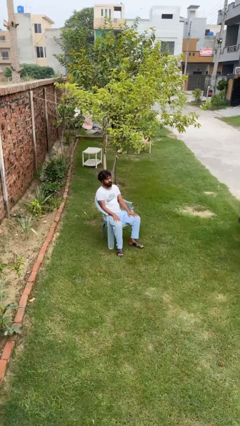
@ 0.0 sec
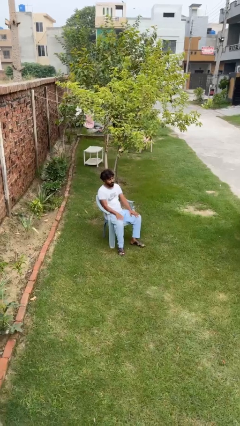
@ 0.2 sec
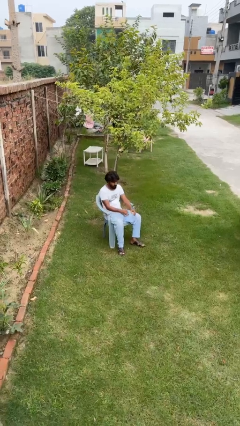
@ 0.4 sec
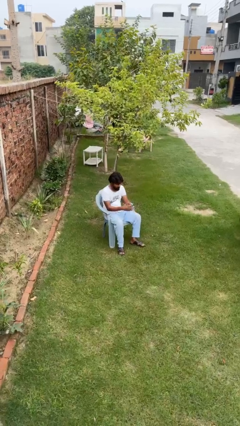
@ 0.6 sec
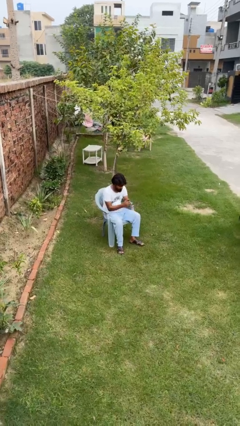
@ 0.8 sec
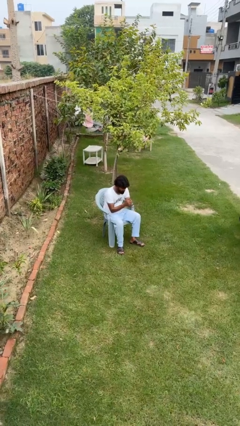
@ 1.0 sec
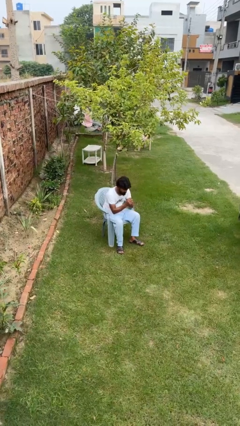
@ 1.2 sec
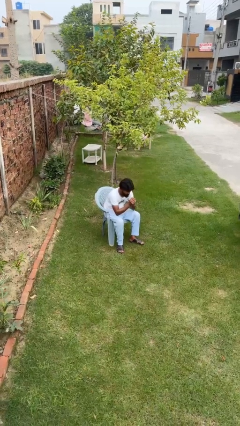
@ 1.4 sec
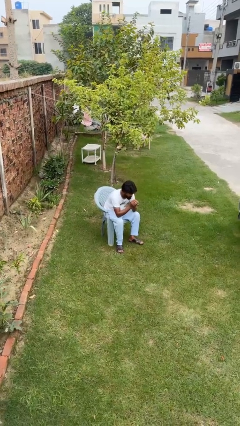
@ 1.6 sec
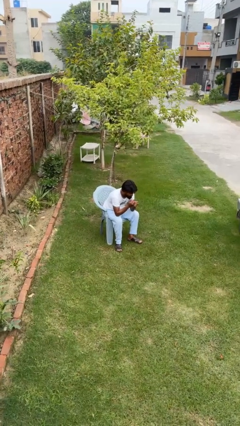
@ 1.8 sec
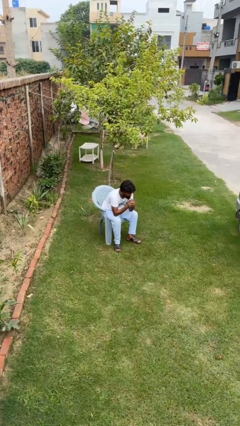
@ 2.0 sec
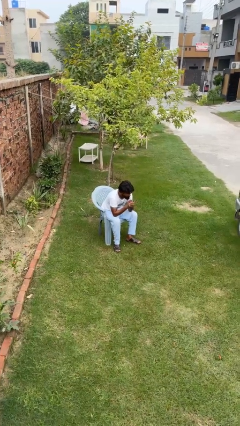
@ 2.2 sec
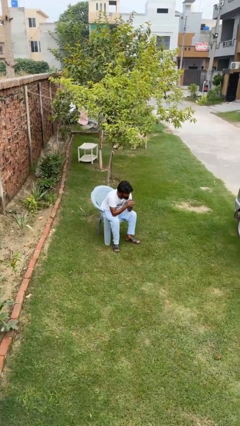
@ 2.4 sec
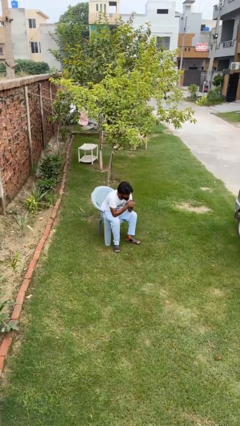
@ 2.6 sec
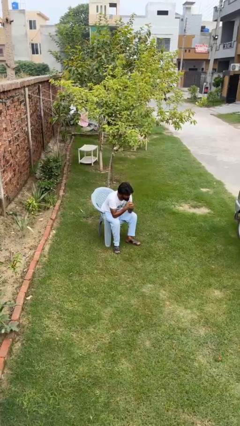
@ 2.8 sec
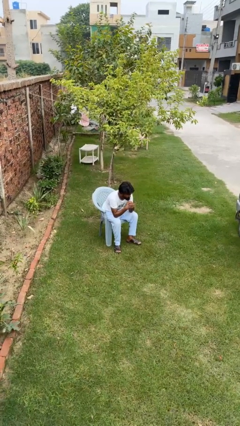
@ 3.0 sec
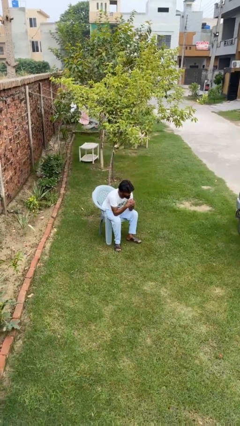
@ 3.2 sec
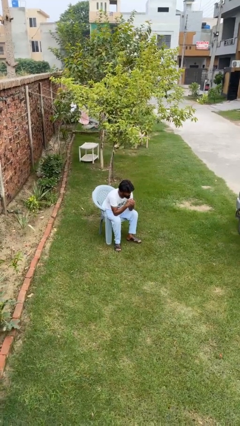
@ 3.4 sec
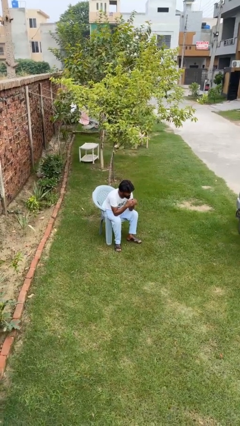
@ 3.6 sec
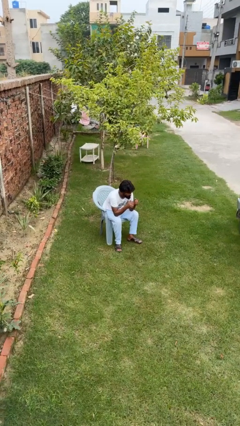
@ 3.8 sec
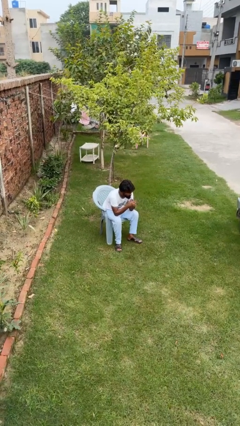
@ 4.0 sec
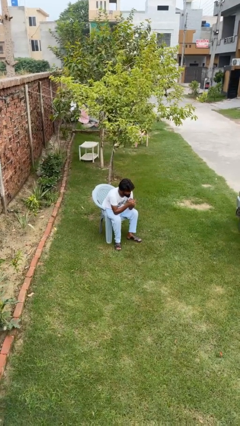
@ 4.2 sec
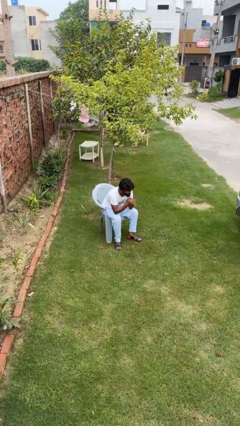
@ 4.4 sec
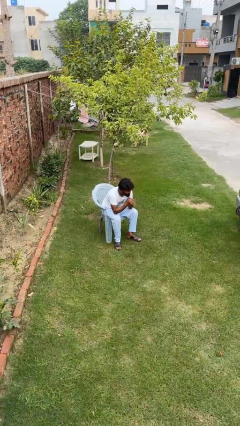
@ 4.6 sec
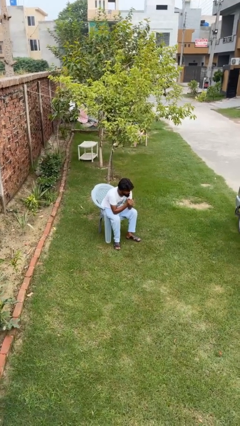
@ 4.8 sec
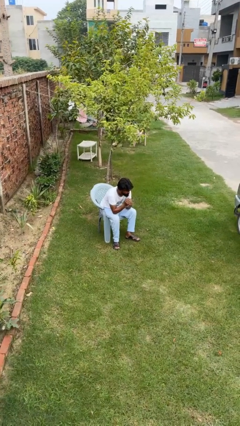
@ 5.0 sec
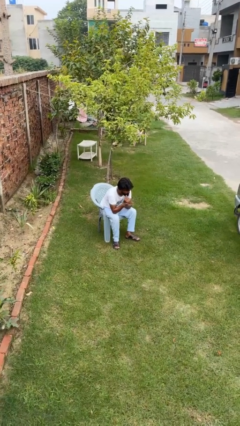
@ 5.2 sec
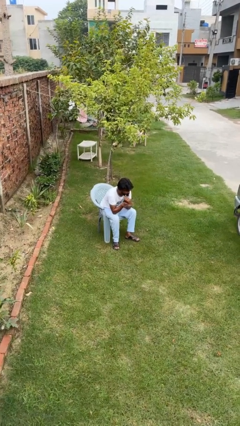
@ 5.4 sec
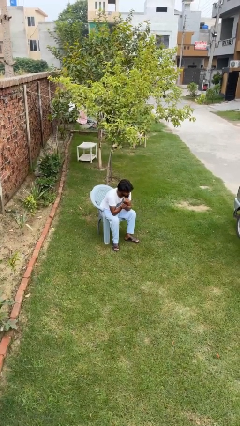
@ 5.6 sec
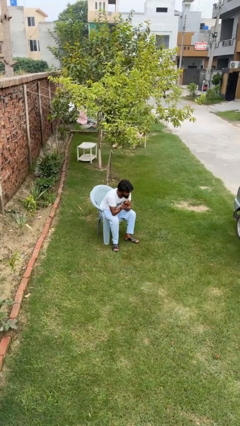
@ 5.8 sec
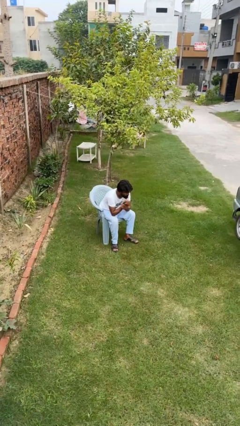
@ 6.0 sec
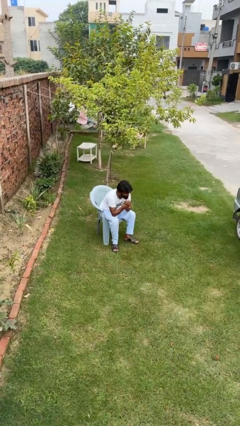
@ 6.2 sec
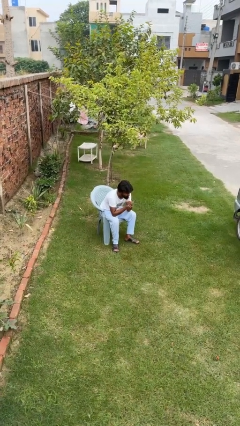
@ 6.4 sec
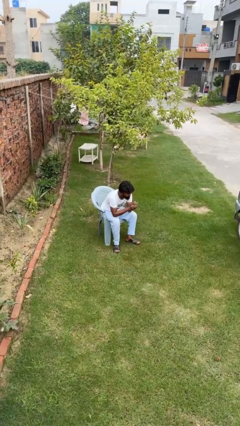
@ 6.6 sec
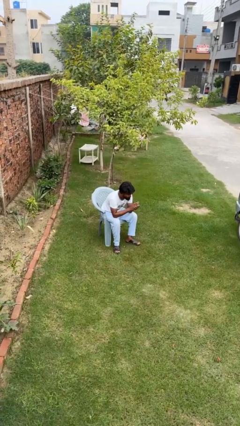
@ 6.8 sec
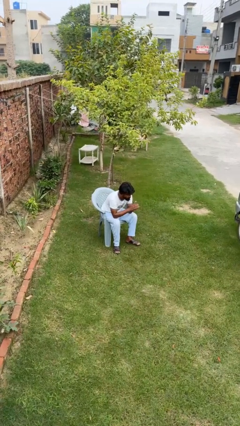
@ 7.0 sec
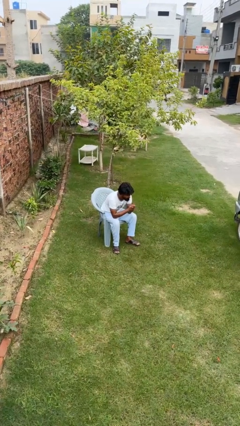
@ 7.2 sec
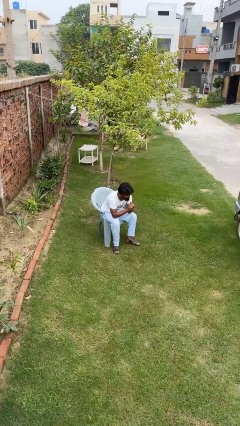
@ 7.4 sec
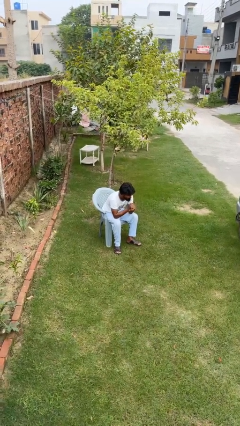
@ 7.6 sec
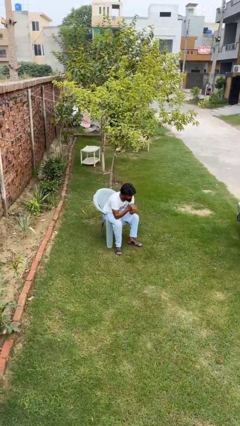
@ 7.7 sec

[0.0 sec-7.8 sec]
person looks at hands in lap

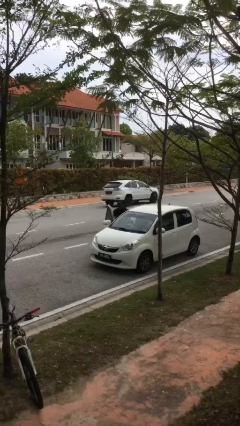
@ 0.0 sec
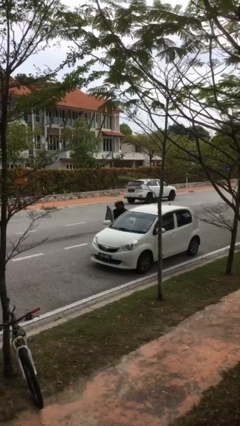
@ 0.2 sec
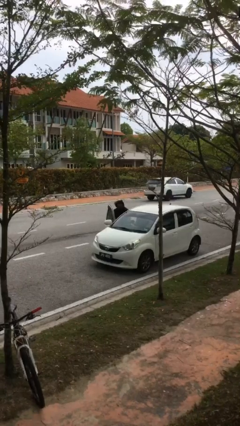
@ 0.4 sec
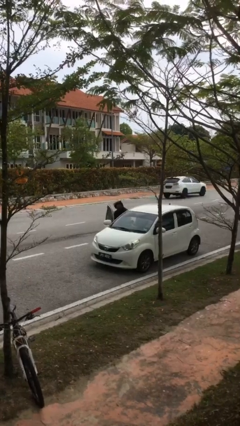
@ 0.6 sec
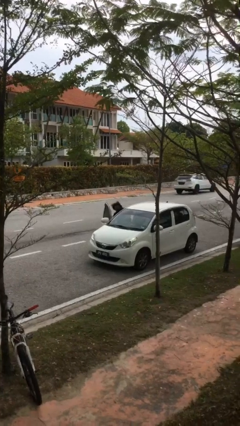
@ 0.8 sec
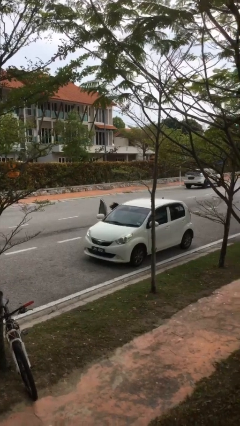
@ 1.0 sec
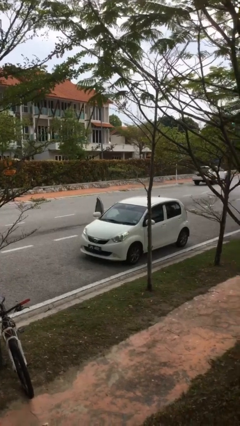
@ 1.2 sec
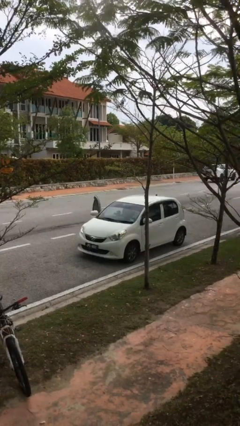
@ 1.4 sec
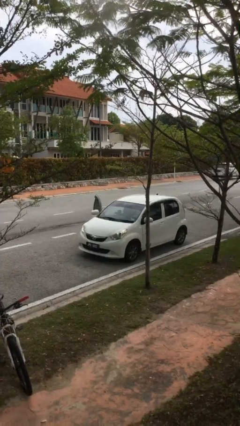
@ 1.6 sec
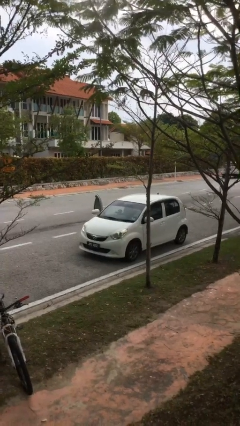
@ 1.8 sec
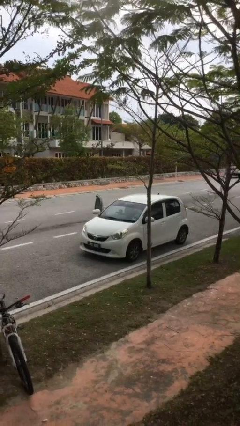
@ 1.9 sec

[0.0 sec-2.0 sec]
person enters car

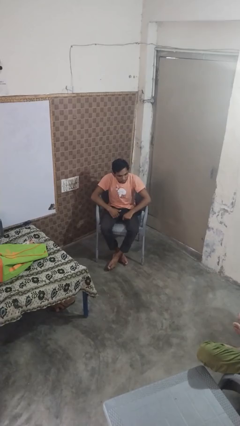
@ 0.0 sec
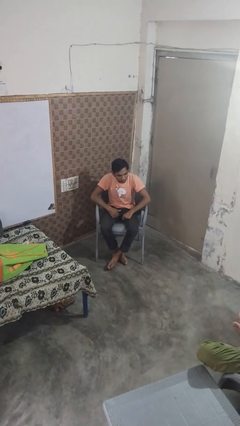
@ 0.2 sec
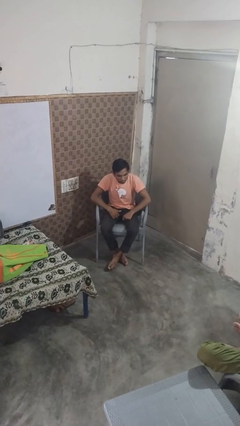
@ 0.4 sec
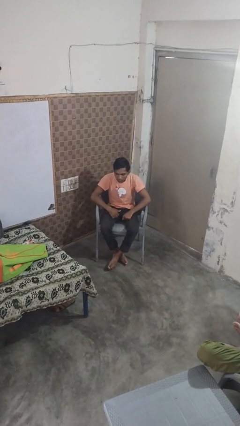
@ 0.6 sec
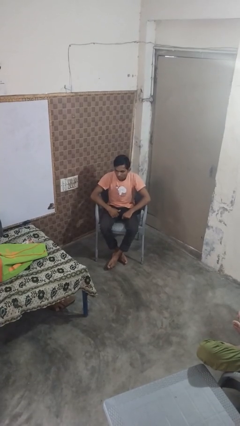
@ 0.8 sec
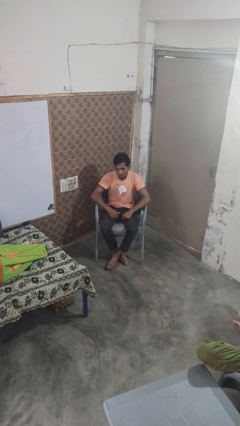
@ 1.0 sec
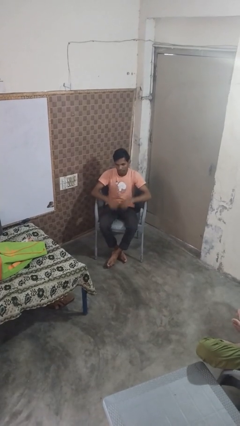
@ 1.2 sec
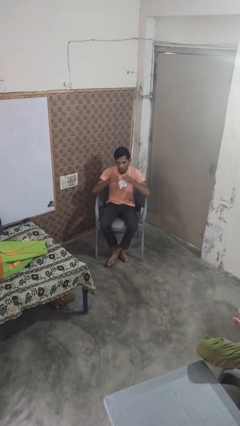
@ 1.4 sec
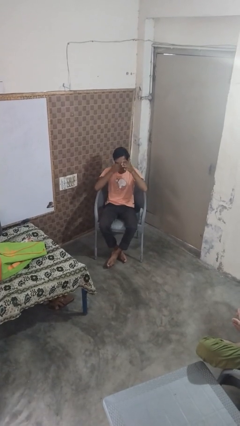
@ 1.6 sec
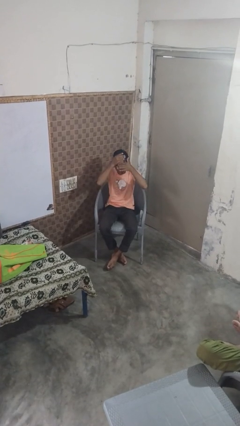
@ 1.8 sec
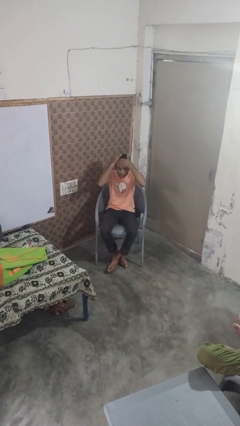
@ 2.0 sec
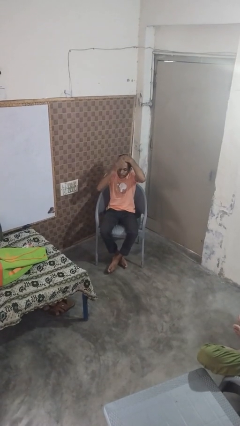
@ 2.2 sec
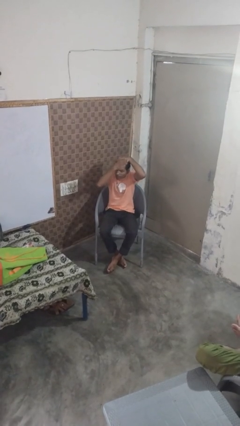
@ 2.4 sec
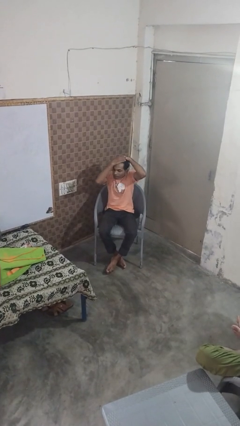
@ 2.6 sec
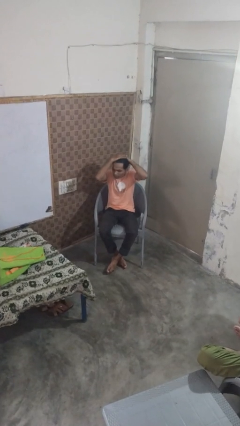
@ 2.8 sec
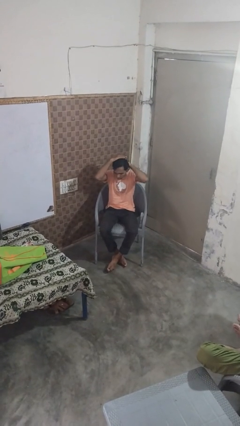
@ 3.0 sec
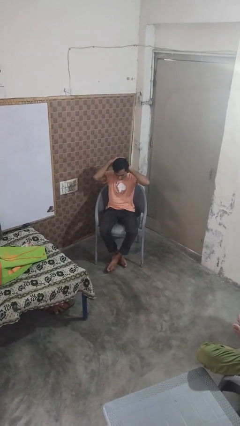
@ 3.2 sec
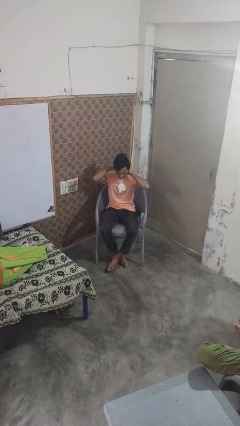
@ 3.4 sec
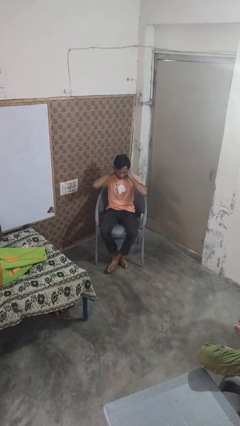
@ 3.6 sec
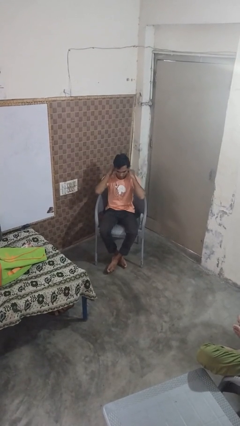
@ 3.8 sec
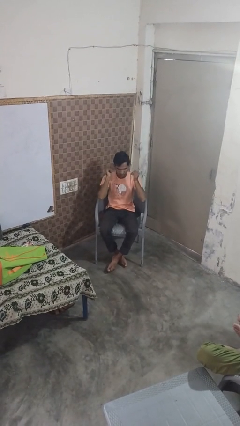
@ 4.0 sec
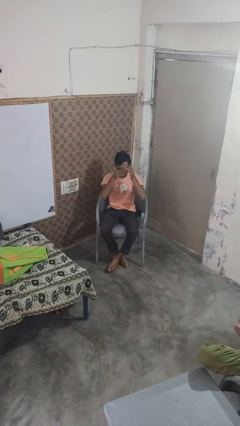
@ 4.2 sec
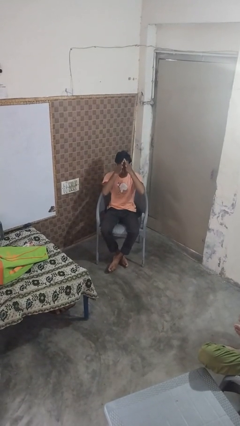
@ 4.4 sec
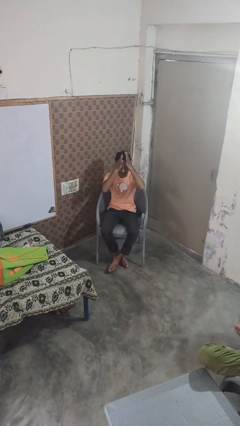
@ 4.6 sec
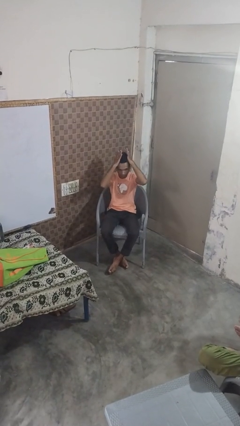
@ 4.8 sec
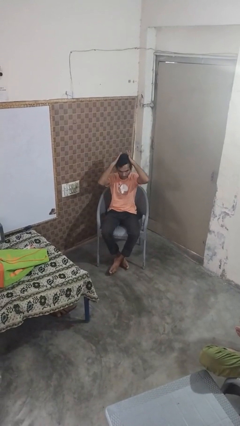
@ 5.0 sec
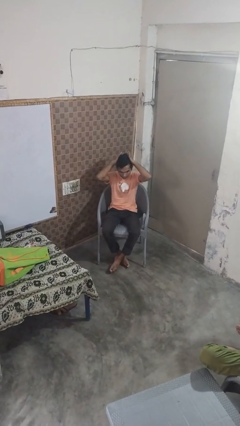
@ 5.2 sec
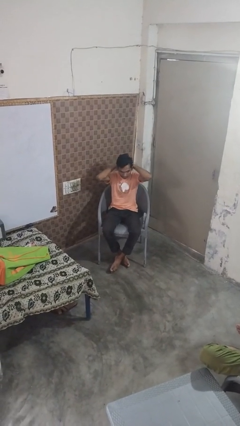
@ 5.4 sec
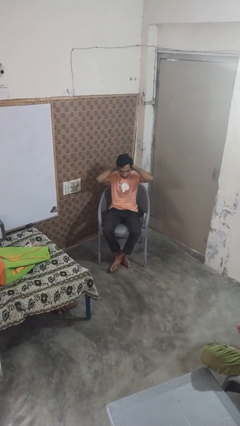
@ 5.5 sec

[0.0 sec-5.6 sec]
person strokes hair

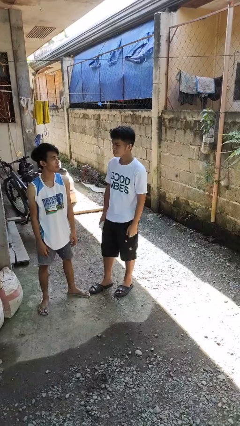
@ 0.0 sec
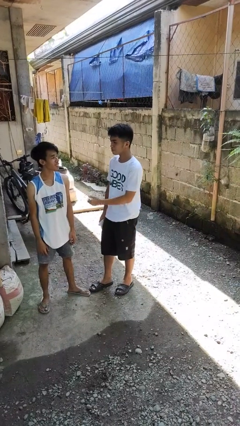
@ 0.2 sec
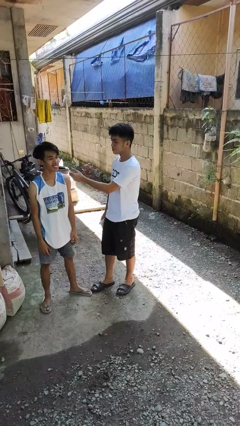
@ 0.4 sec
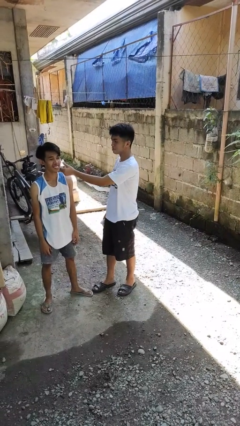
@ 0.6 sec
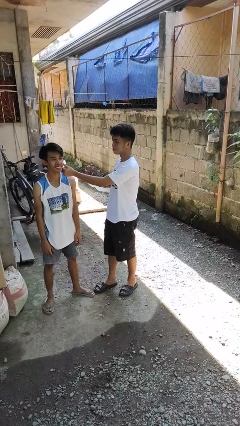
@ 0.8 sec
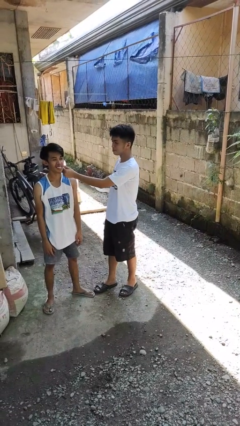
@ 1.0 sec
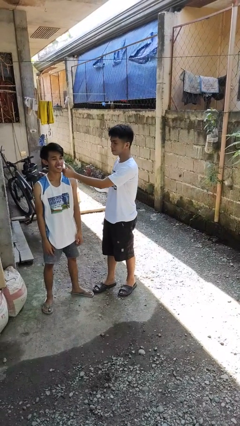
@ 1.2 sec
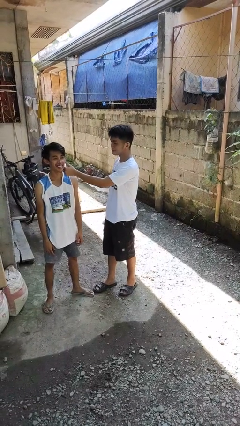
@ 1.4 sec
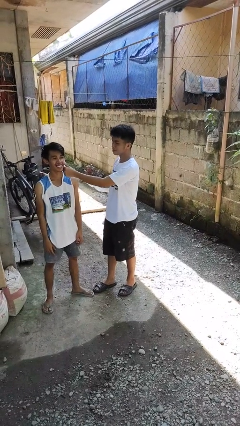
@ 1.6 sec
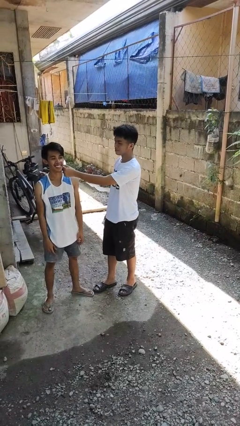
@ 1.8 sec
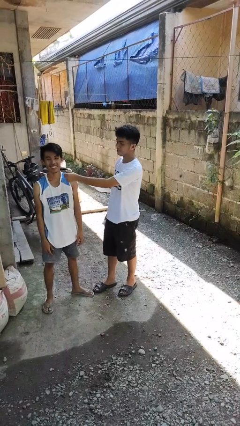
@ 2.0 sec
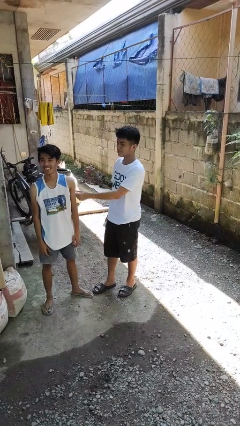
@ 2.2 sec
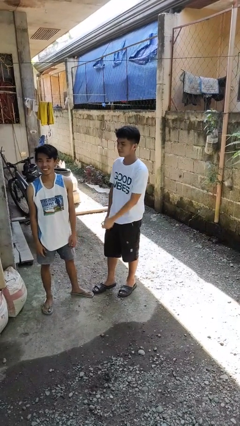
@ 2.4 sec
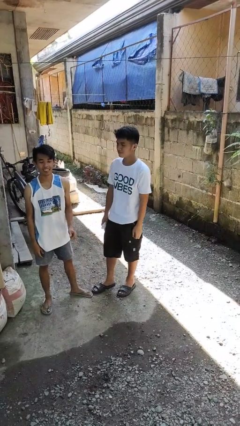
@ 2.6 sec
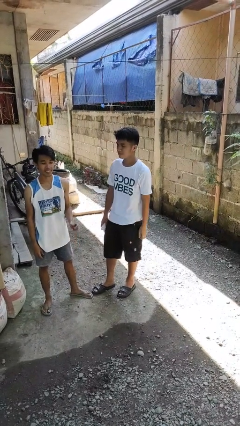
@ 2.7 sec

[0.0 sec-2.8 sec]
person touches face of person
